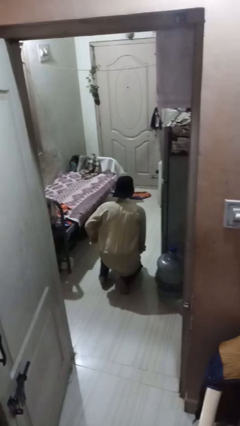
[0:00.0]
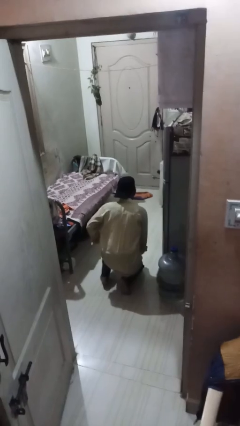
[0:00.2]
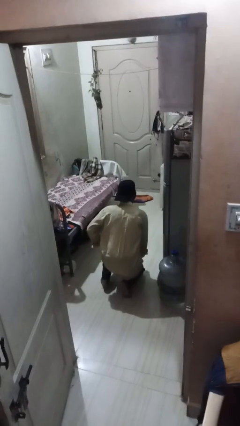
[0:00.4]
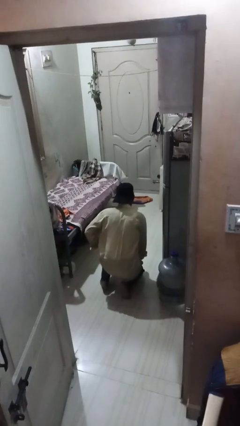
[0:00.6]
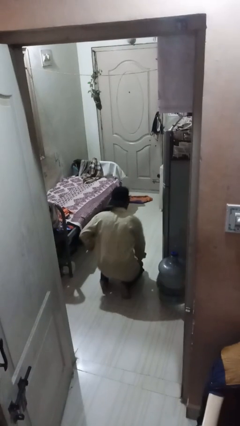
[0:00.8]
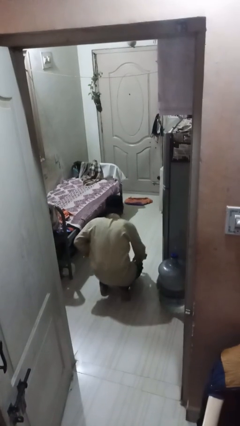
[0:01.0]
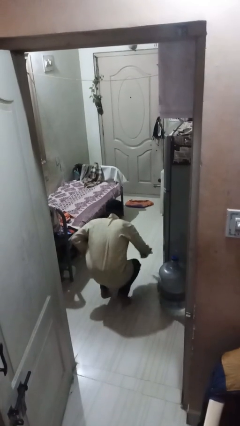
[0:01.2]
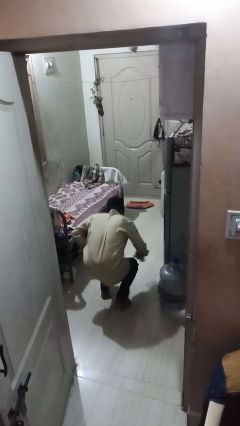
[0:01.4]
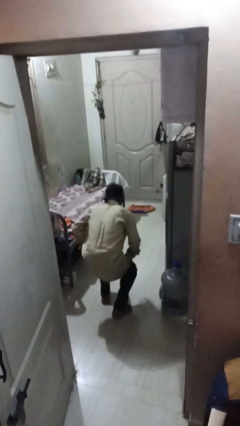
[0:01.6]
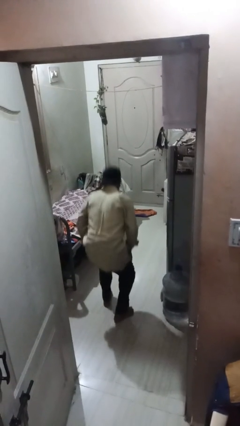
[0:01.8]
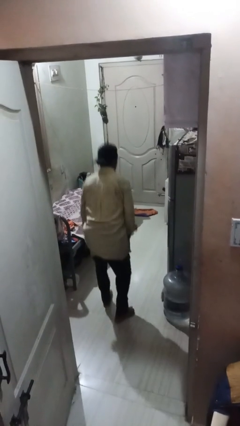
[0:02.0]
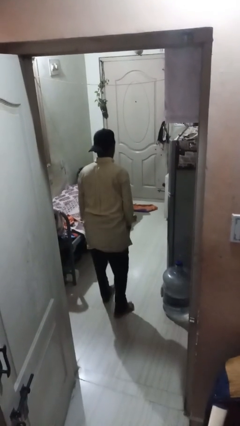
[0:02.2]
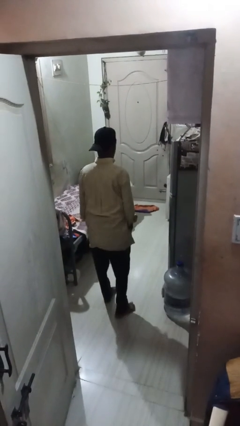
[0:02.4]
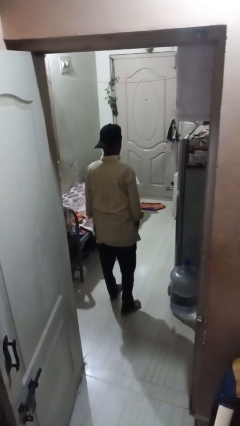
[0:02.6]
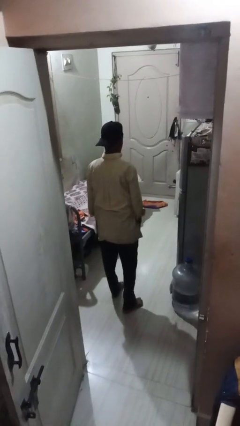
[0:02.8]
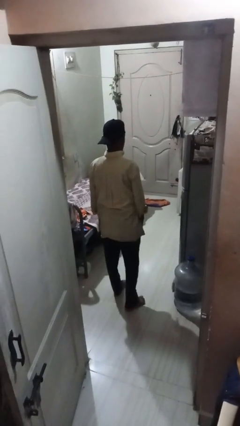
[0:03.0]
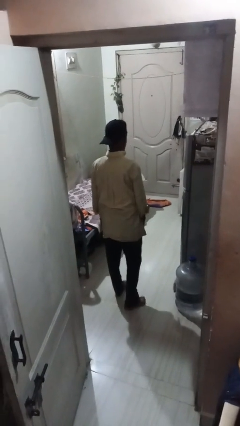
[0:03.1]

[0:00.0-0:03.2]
person stands up from floor

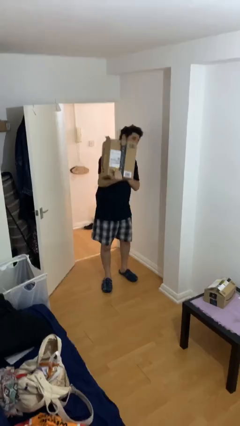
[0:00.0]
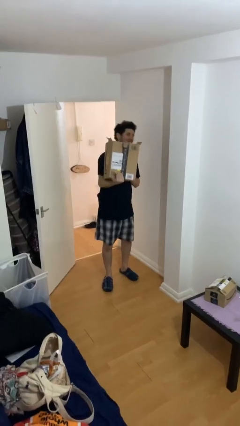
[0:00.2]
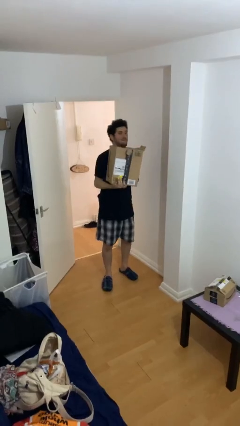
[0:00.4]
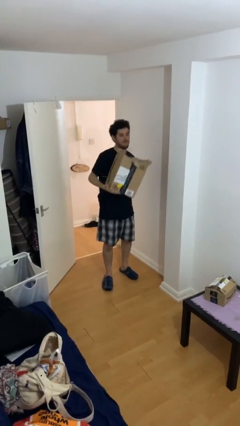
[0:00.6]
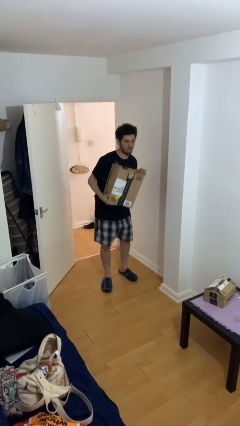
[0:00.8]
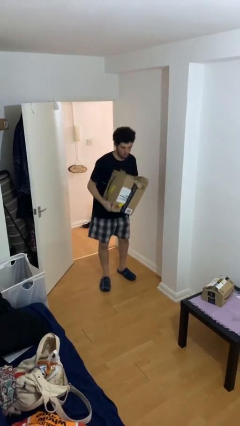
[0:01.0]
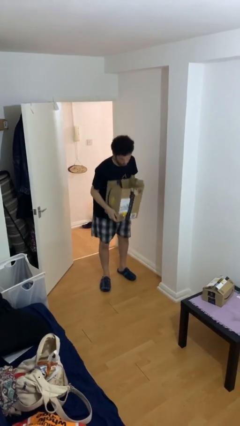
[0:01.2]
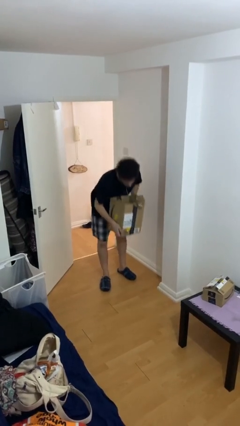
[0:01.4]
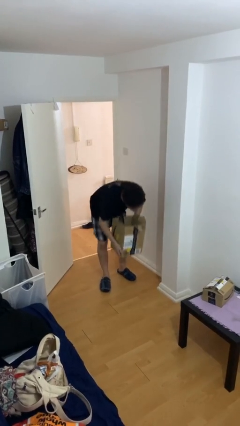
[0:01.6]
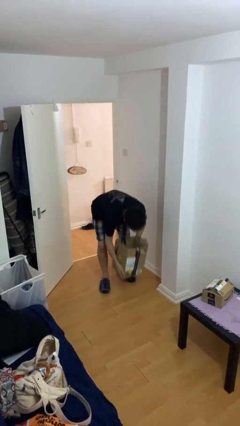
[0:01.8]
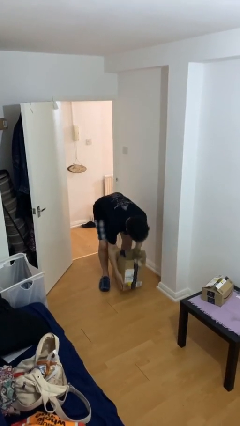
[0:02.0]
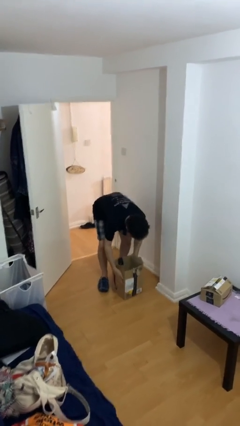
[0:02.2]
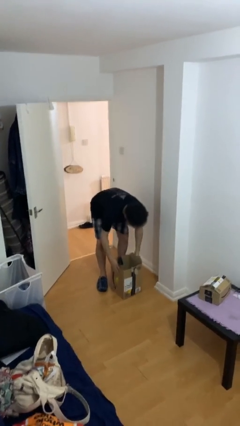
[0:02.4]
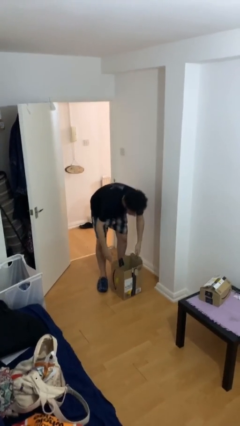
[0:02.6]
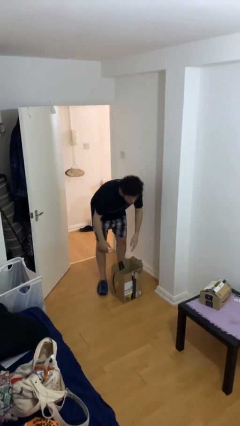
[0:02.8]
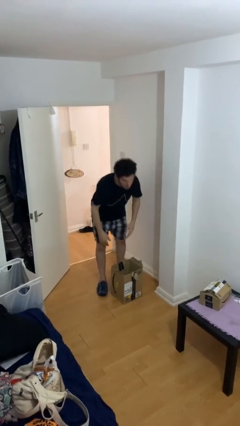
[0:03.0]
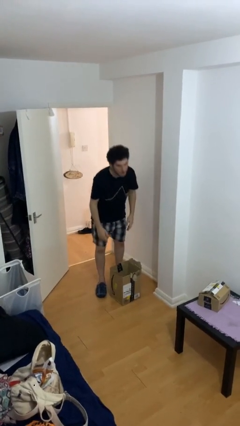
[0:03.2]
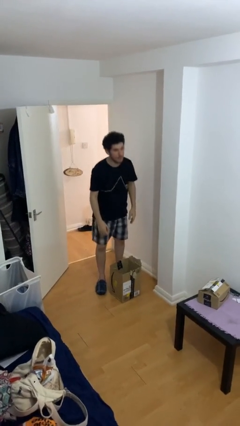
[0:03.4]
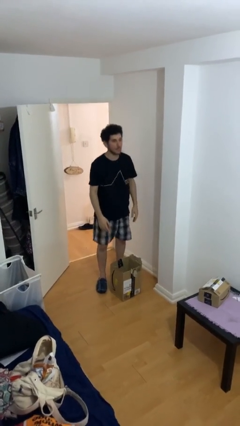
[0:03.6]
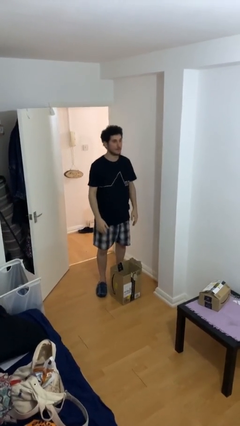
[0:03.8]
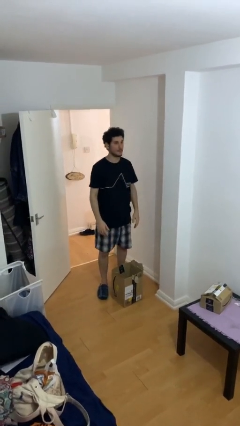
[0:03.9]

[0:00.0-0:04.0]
person puts down object on floor

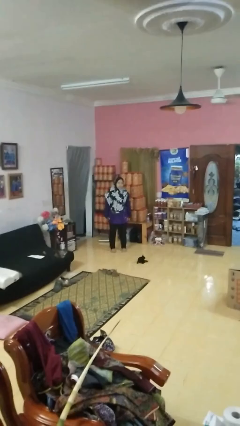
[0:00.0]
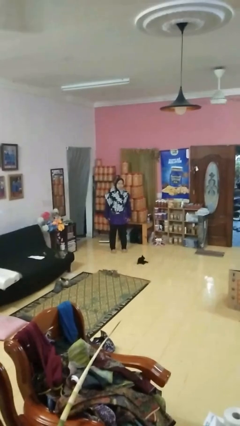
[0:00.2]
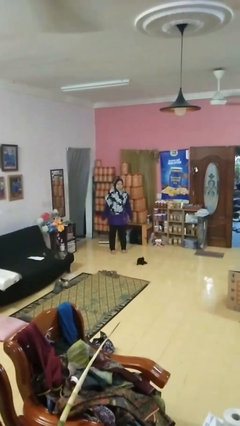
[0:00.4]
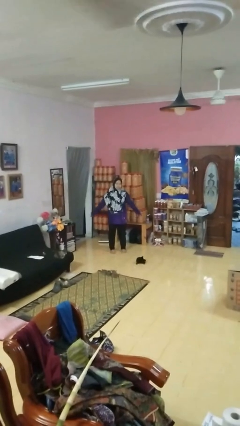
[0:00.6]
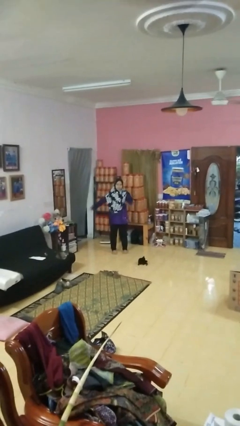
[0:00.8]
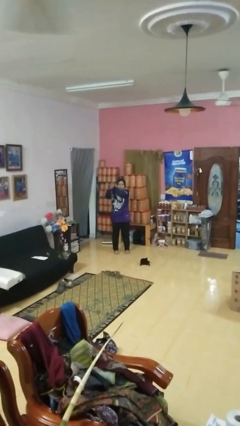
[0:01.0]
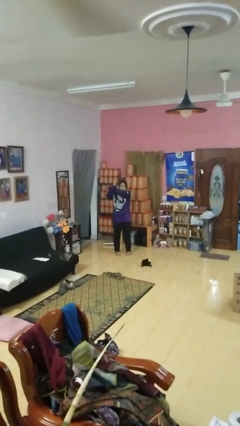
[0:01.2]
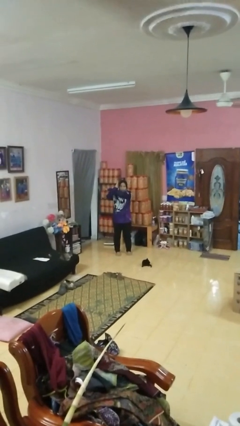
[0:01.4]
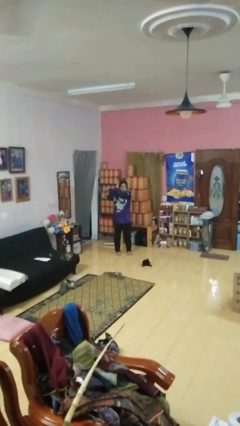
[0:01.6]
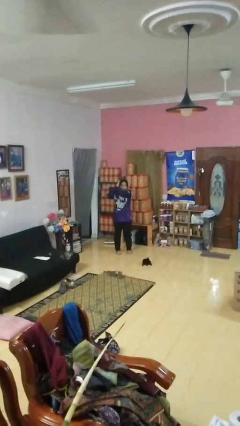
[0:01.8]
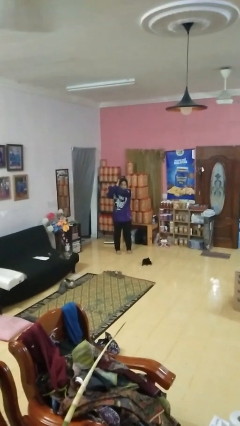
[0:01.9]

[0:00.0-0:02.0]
person gestures arms x

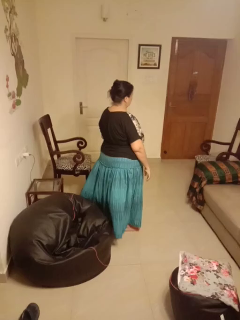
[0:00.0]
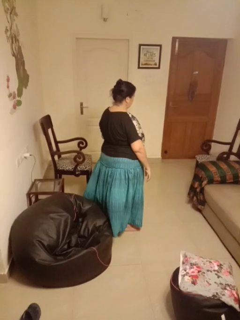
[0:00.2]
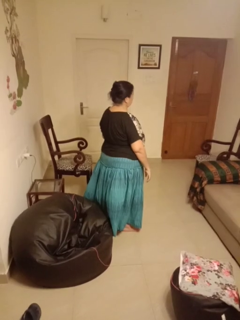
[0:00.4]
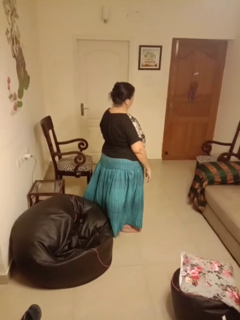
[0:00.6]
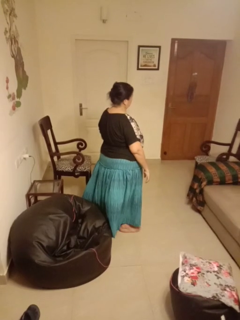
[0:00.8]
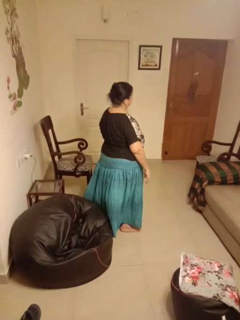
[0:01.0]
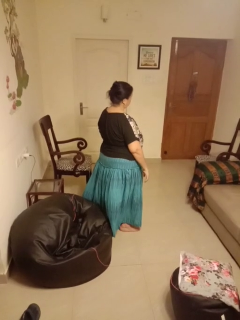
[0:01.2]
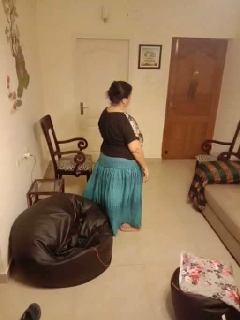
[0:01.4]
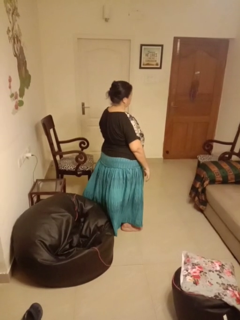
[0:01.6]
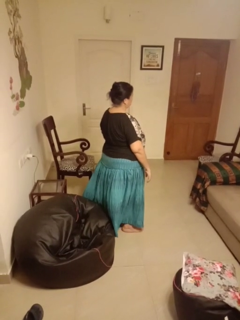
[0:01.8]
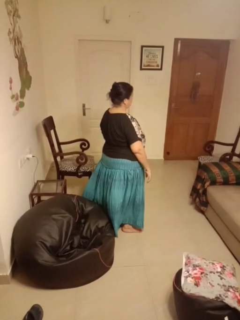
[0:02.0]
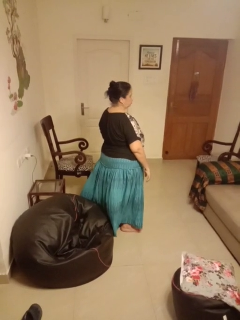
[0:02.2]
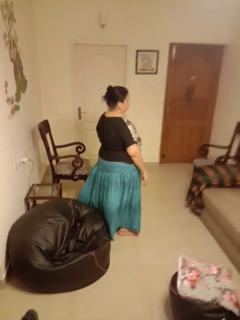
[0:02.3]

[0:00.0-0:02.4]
person nods head

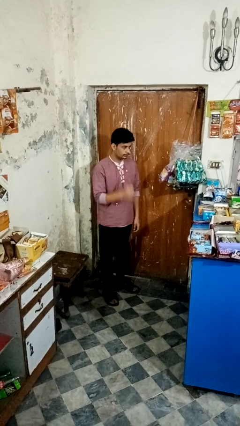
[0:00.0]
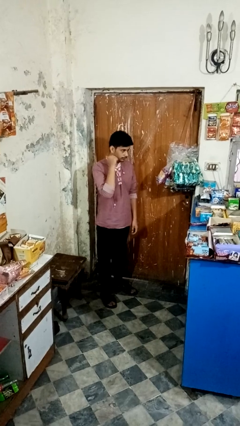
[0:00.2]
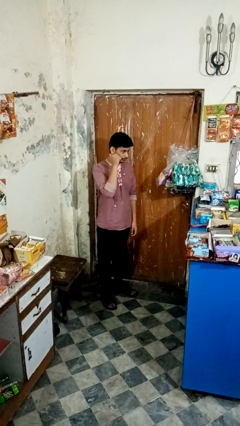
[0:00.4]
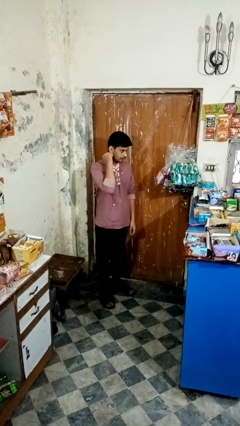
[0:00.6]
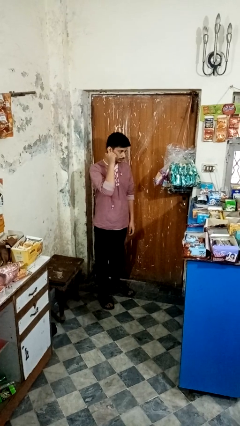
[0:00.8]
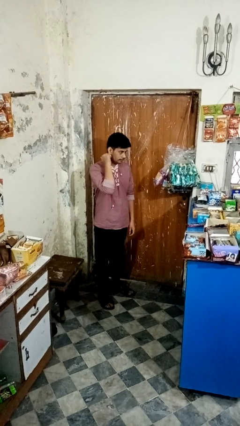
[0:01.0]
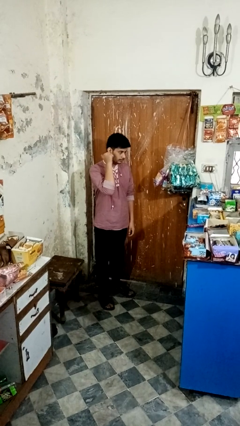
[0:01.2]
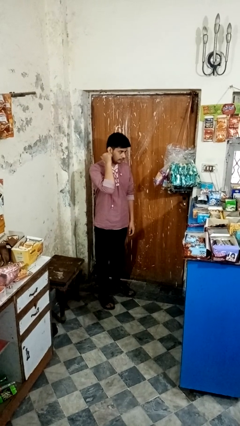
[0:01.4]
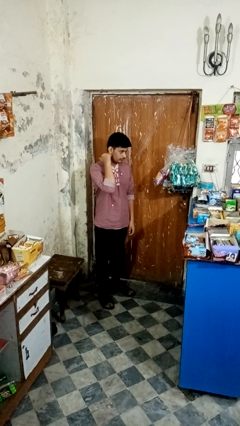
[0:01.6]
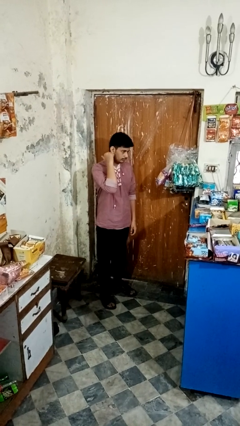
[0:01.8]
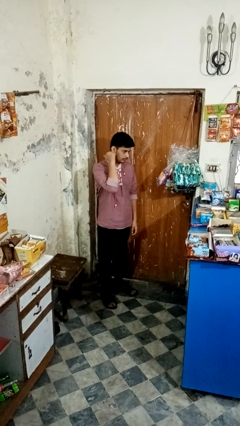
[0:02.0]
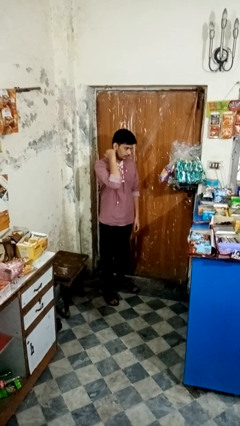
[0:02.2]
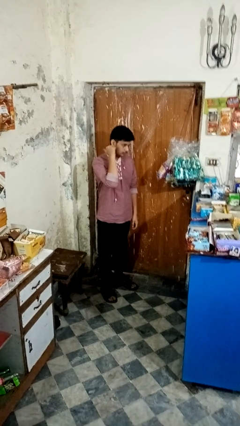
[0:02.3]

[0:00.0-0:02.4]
person gestures behind me

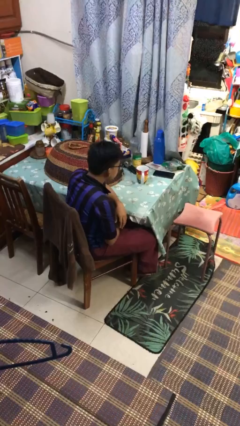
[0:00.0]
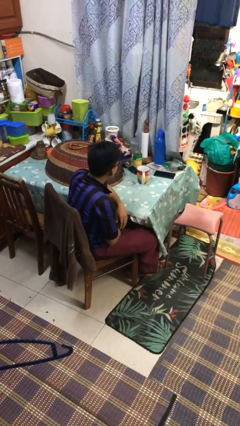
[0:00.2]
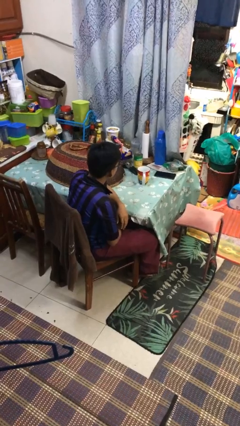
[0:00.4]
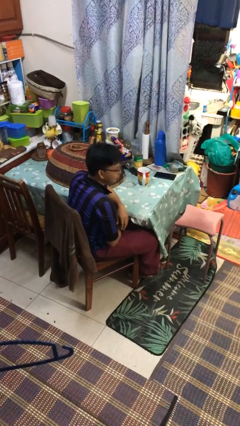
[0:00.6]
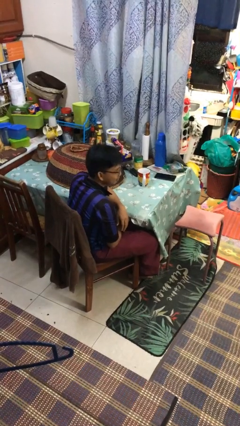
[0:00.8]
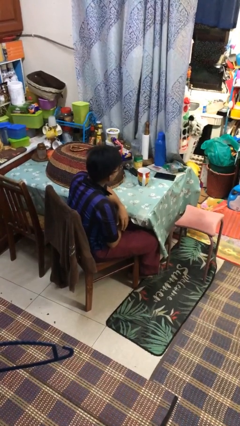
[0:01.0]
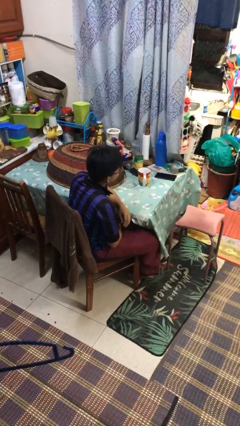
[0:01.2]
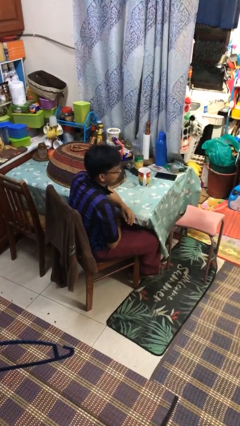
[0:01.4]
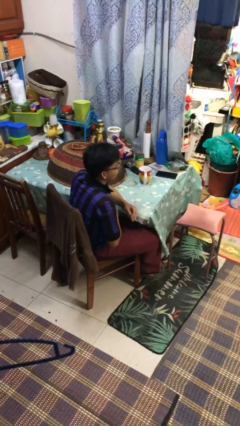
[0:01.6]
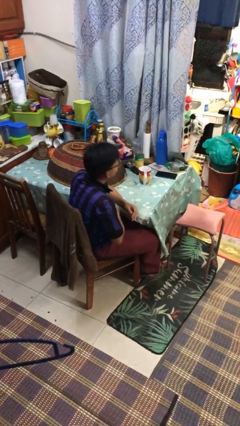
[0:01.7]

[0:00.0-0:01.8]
person shakes head

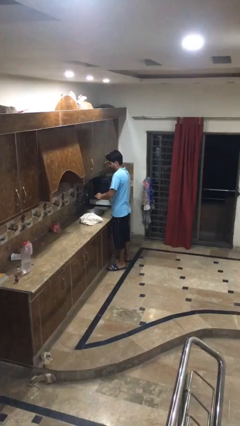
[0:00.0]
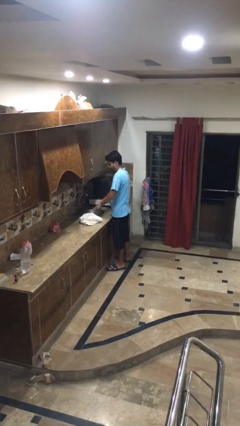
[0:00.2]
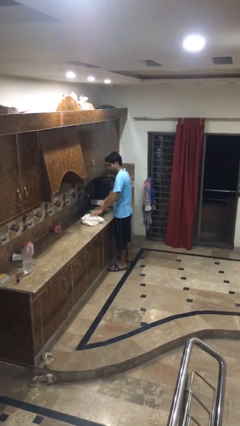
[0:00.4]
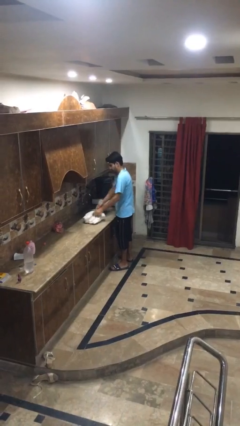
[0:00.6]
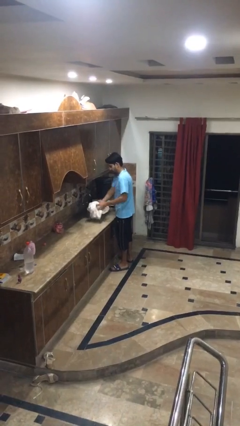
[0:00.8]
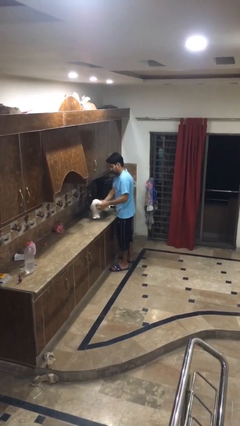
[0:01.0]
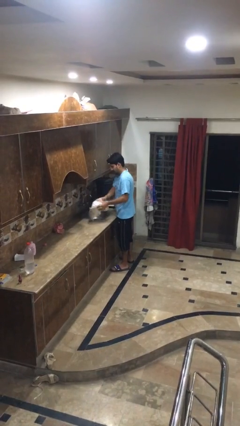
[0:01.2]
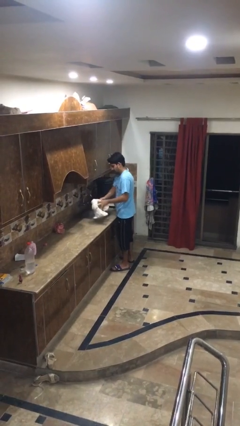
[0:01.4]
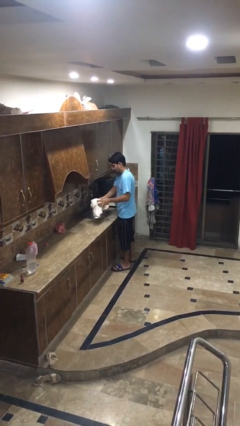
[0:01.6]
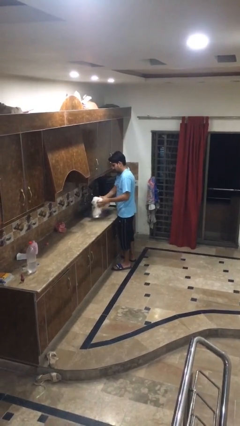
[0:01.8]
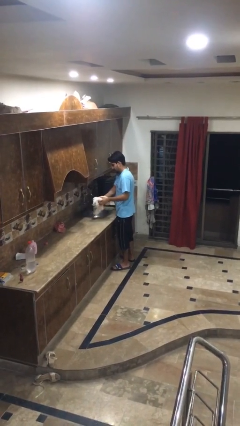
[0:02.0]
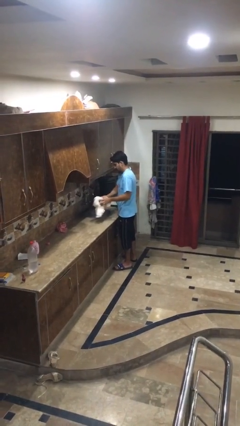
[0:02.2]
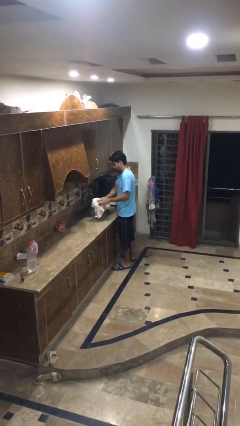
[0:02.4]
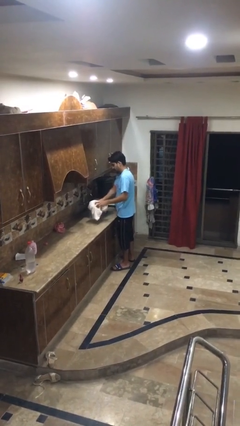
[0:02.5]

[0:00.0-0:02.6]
person dries hands with towel
